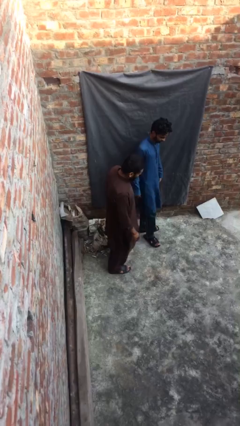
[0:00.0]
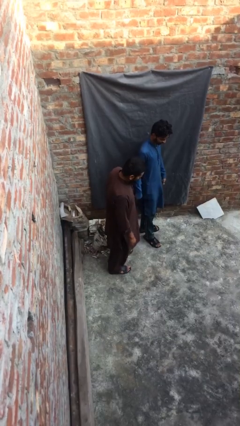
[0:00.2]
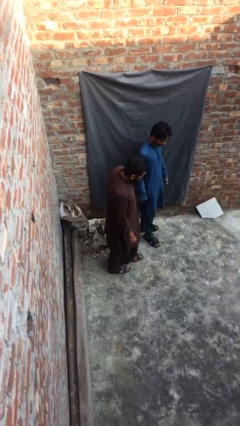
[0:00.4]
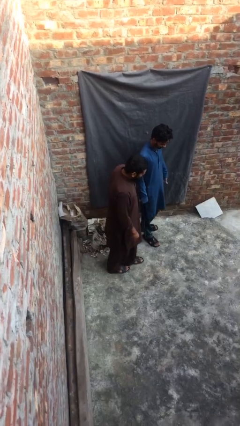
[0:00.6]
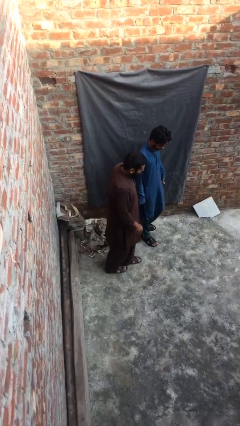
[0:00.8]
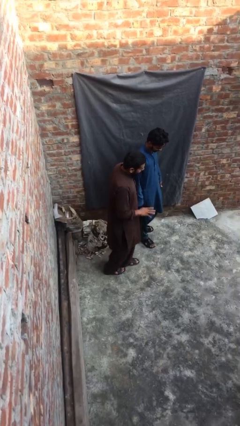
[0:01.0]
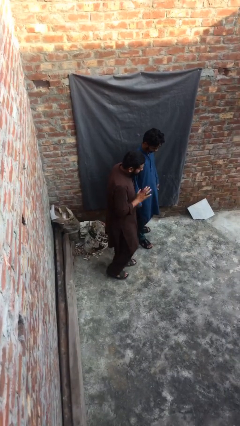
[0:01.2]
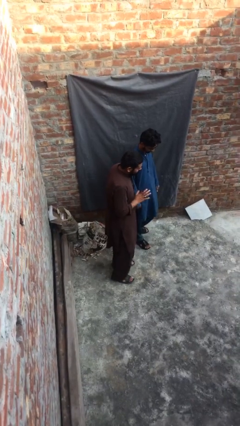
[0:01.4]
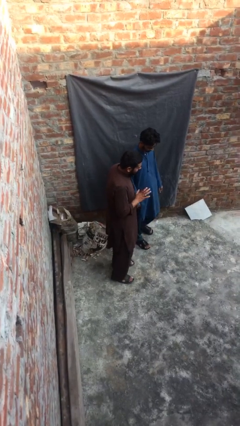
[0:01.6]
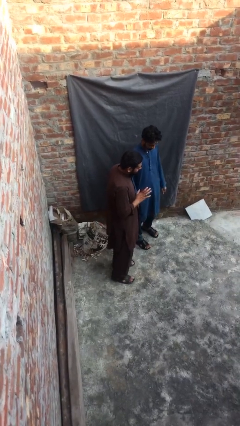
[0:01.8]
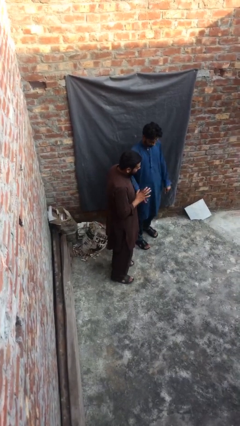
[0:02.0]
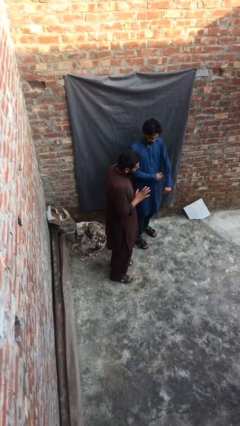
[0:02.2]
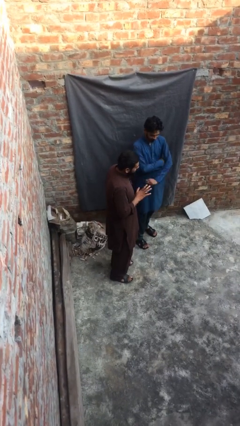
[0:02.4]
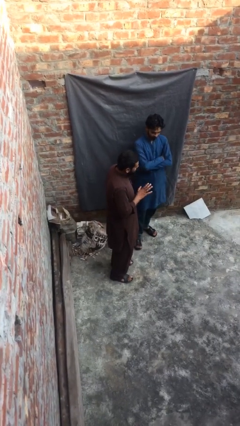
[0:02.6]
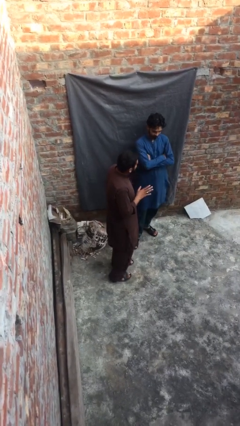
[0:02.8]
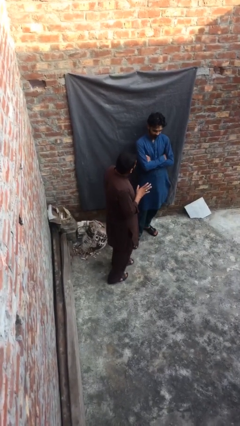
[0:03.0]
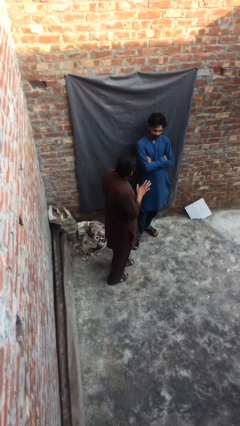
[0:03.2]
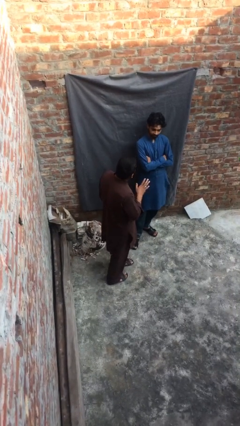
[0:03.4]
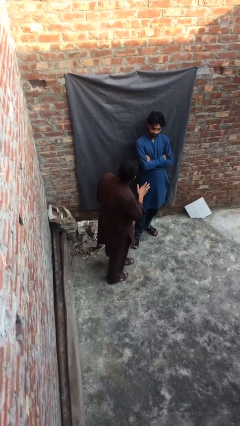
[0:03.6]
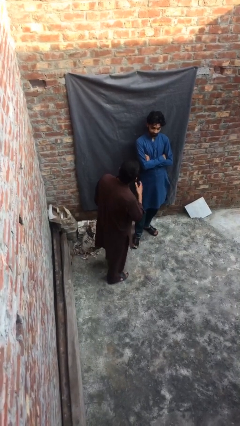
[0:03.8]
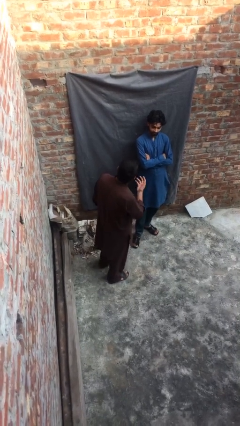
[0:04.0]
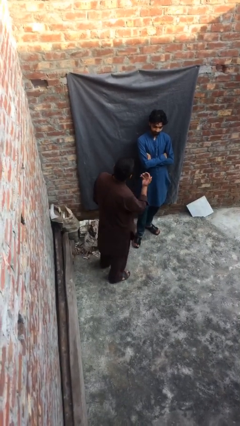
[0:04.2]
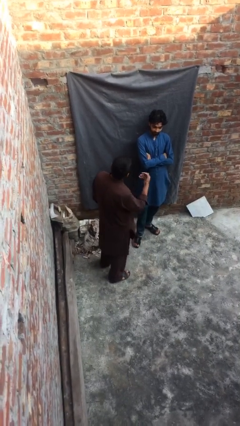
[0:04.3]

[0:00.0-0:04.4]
person talks to person

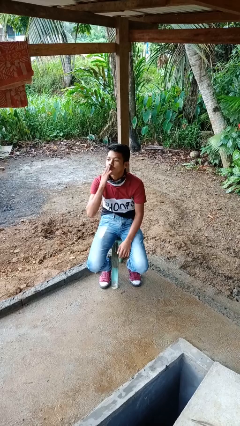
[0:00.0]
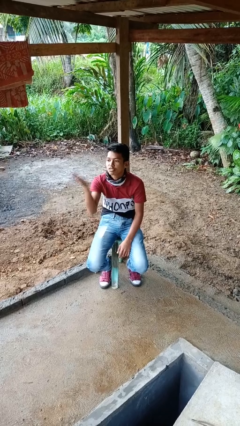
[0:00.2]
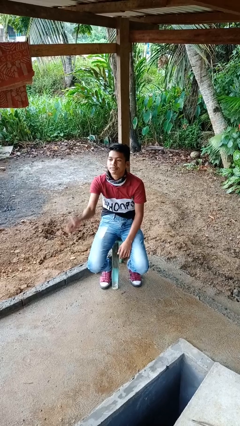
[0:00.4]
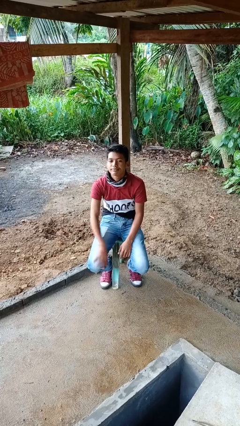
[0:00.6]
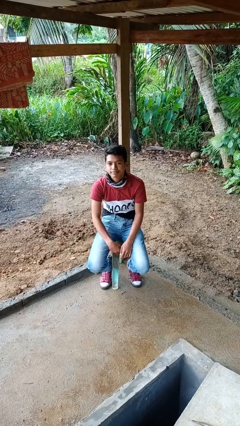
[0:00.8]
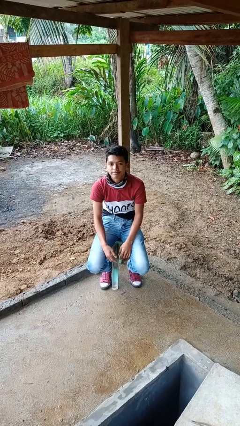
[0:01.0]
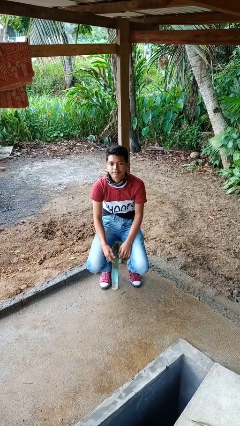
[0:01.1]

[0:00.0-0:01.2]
person gestures blow kiss

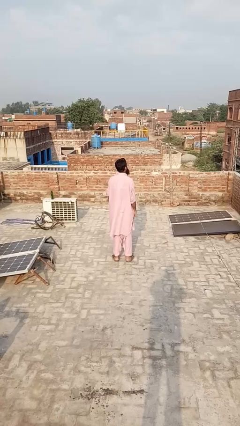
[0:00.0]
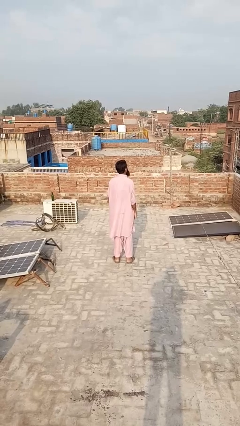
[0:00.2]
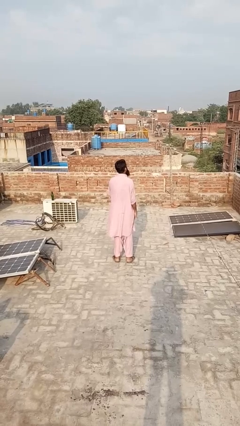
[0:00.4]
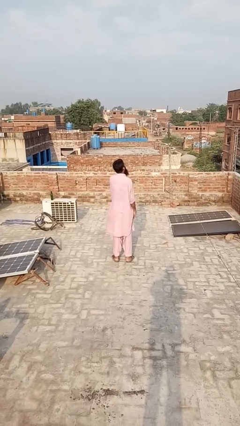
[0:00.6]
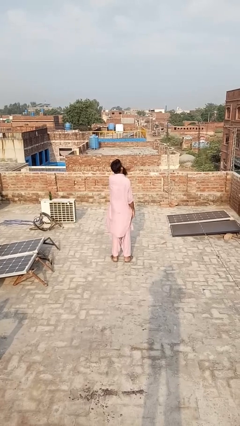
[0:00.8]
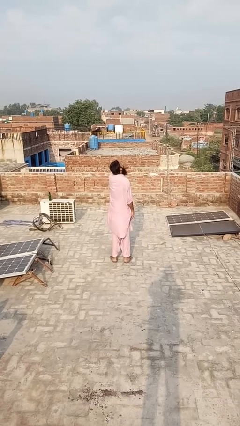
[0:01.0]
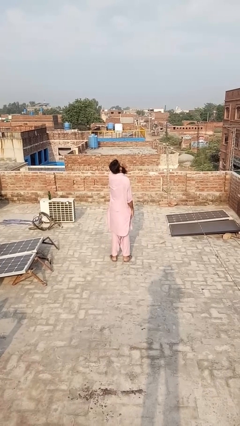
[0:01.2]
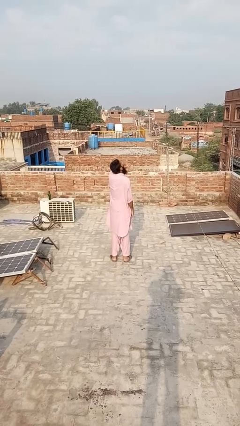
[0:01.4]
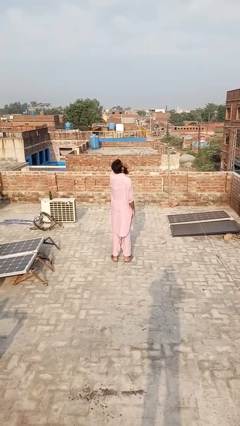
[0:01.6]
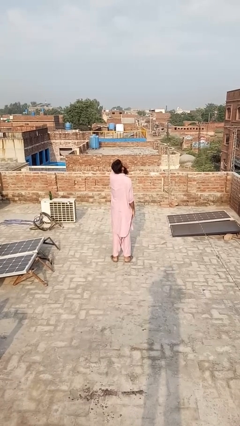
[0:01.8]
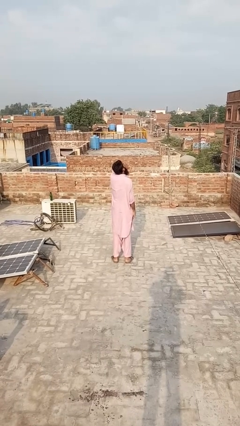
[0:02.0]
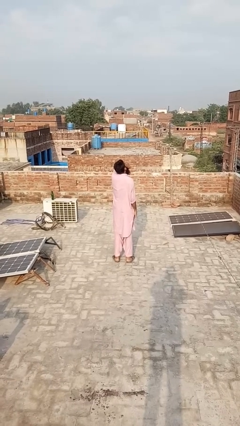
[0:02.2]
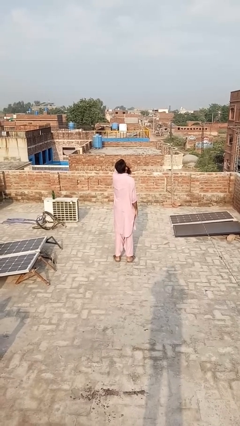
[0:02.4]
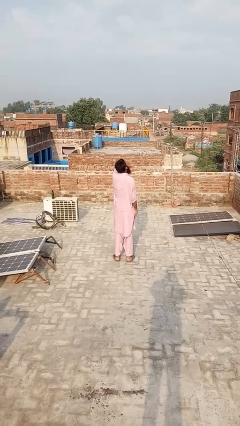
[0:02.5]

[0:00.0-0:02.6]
person yawns

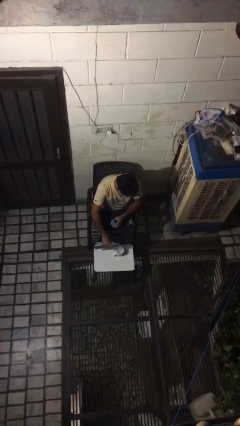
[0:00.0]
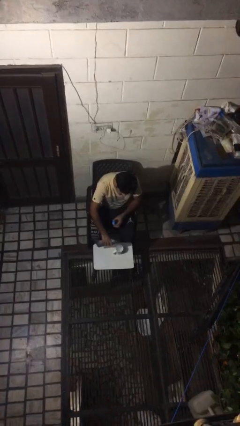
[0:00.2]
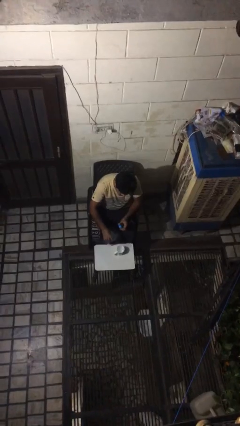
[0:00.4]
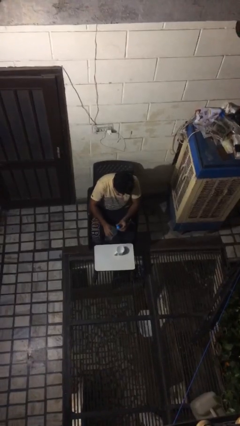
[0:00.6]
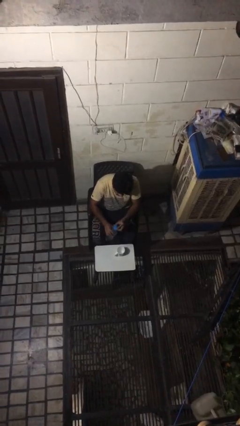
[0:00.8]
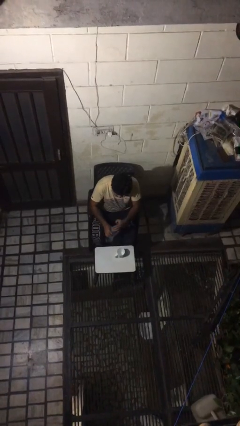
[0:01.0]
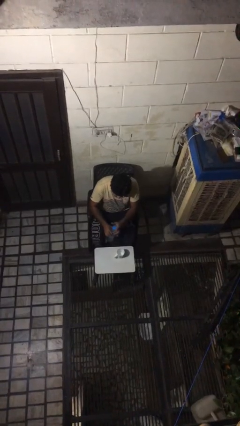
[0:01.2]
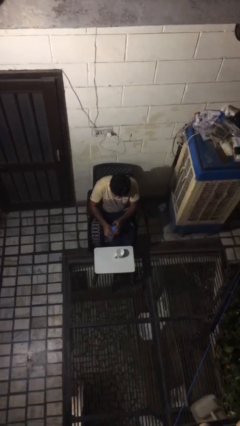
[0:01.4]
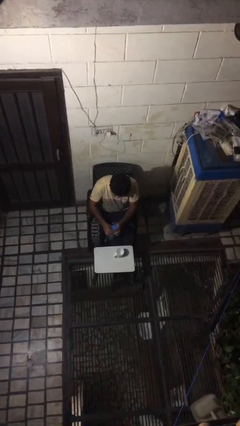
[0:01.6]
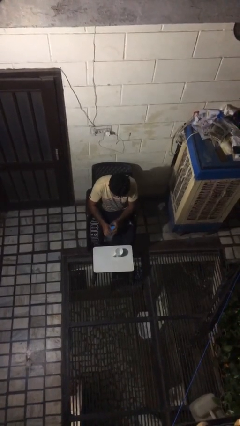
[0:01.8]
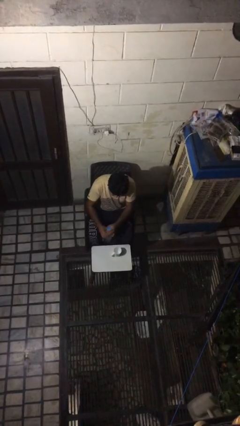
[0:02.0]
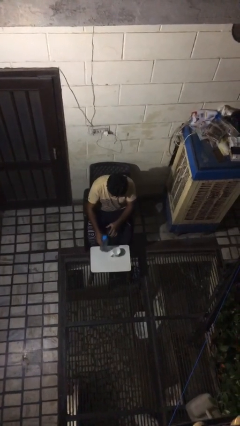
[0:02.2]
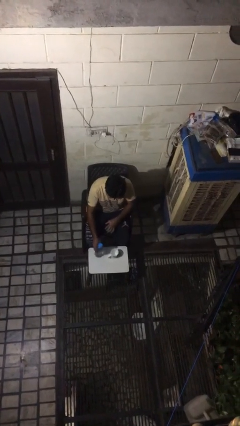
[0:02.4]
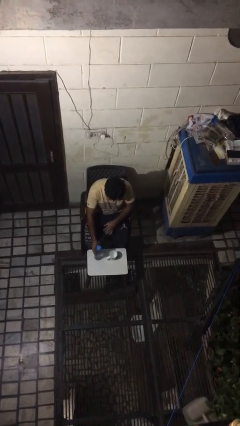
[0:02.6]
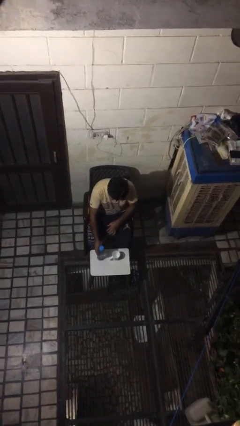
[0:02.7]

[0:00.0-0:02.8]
person screws lid to bottle

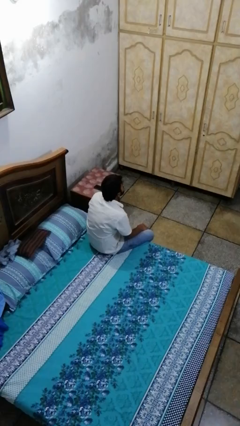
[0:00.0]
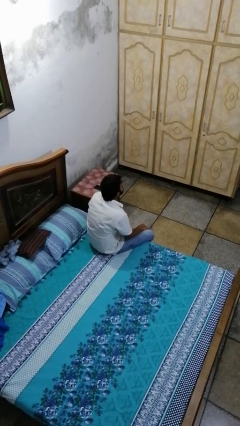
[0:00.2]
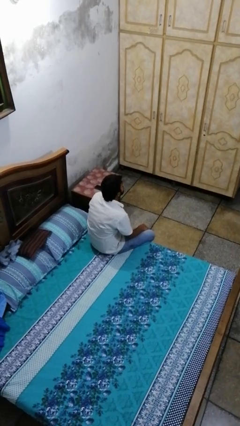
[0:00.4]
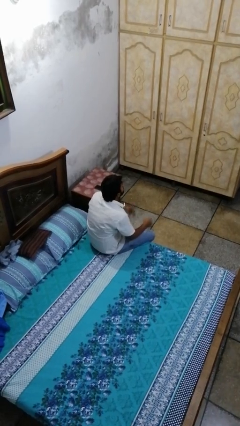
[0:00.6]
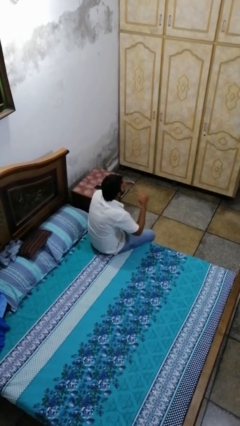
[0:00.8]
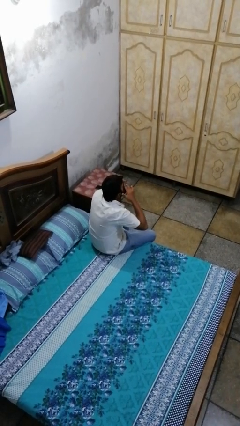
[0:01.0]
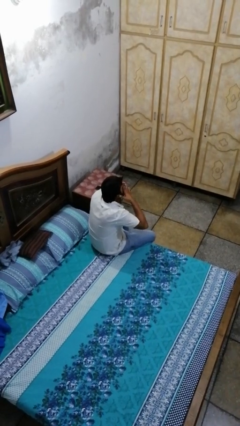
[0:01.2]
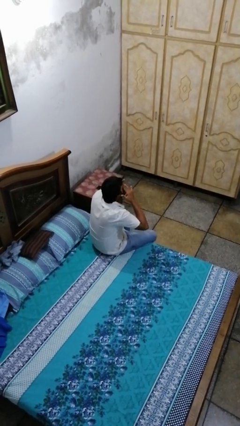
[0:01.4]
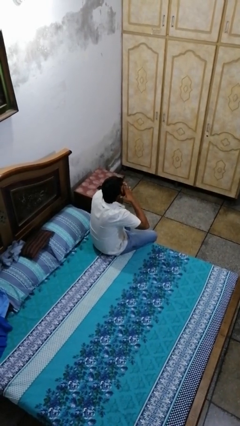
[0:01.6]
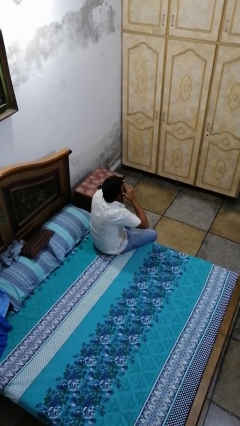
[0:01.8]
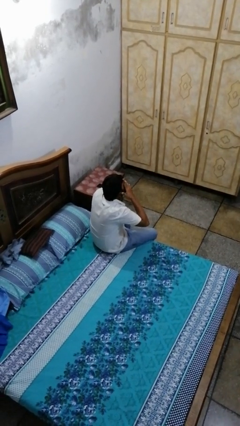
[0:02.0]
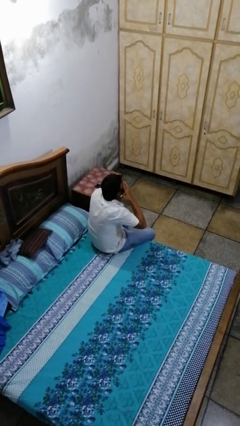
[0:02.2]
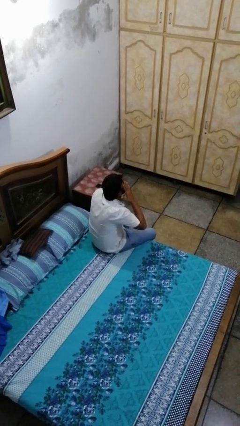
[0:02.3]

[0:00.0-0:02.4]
person rubs eyes

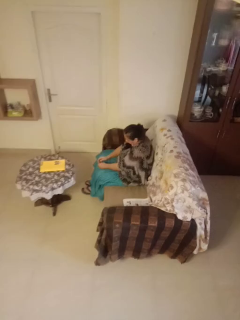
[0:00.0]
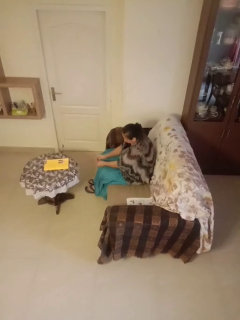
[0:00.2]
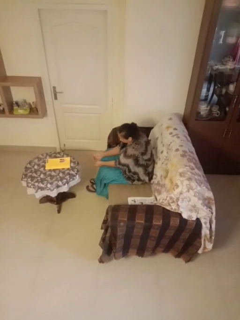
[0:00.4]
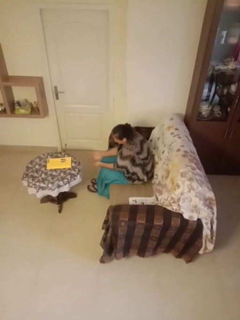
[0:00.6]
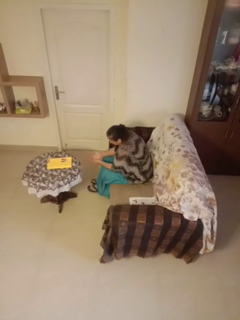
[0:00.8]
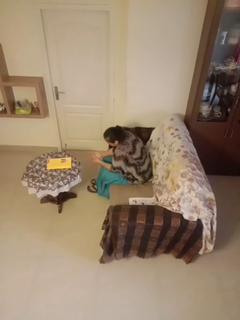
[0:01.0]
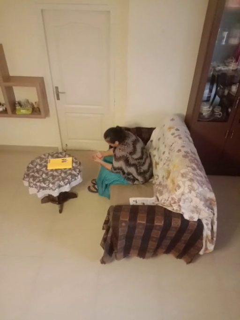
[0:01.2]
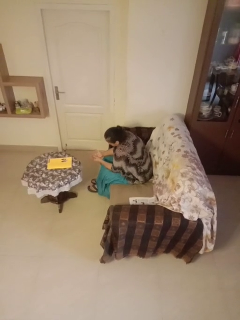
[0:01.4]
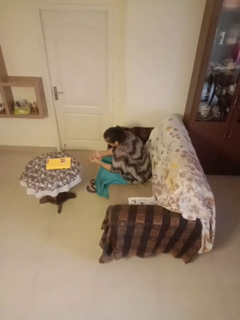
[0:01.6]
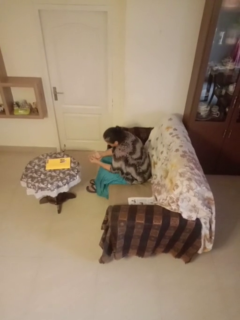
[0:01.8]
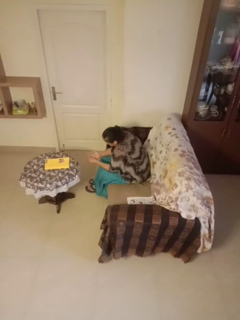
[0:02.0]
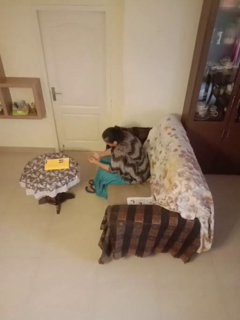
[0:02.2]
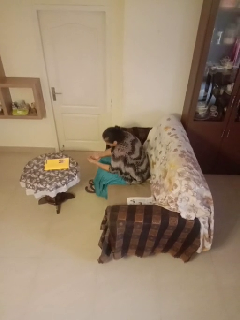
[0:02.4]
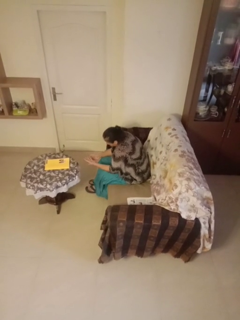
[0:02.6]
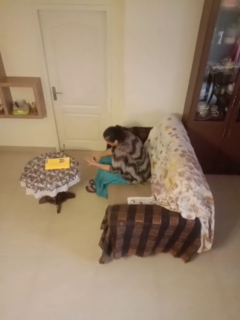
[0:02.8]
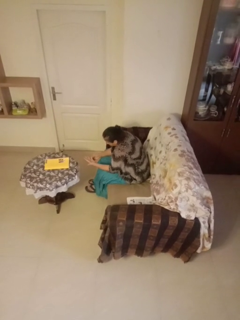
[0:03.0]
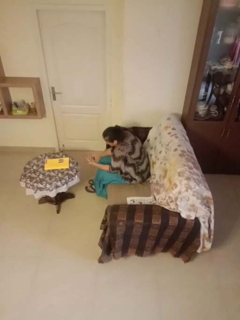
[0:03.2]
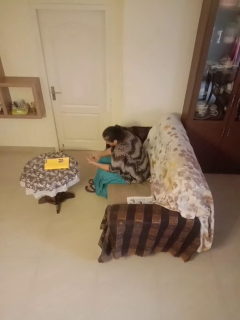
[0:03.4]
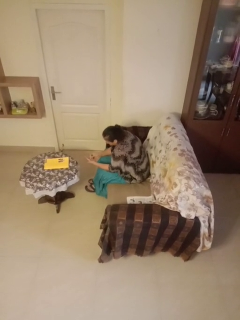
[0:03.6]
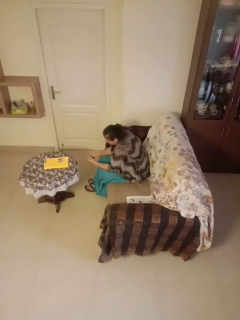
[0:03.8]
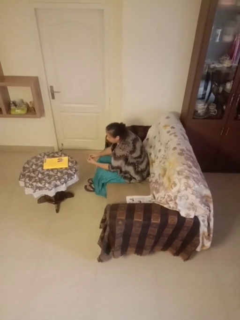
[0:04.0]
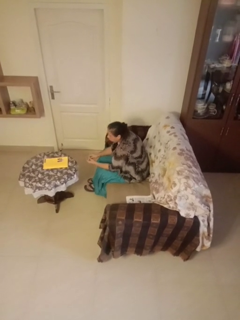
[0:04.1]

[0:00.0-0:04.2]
person looks at hands in lap

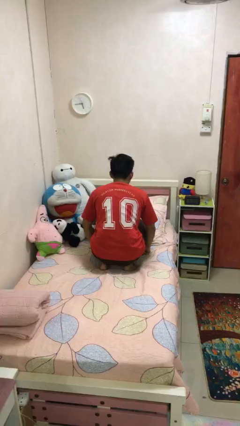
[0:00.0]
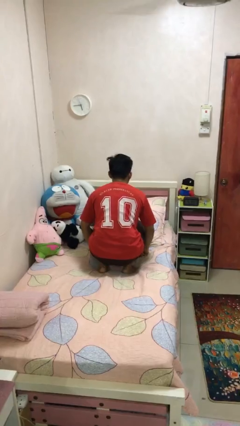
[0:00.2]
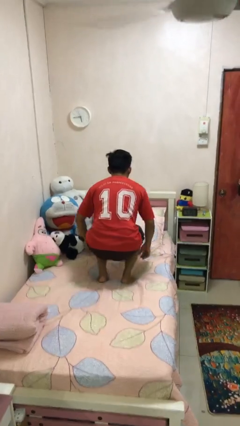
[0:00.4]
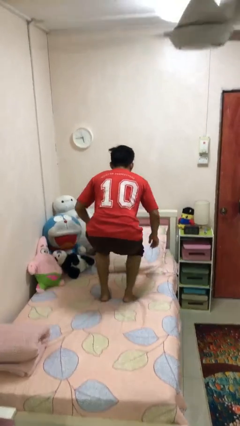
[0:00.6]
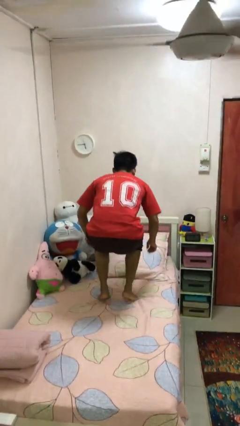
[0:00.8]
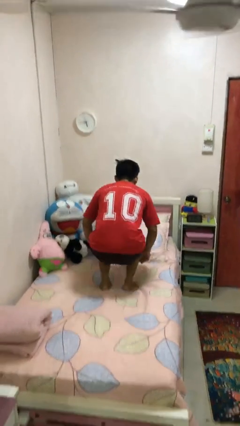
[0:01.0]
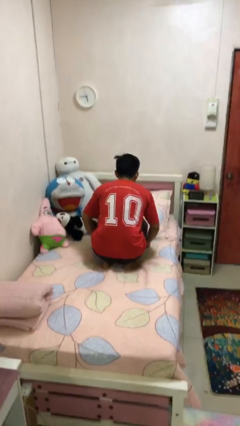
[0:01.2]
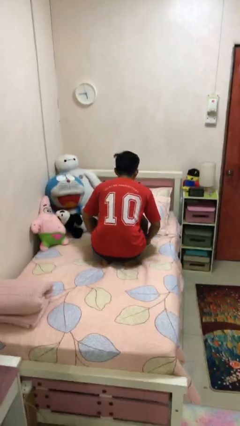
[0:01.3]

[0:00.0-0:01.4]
person jumps on bed
